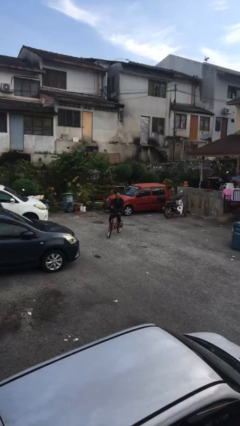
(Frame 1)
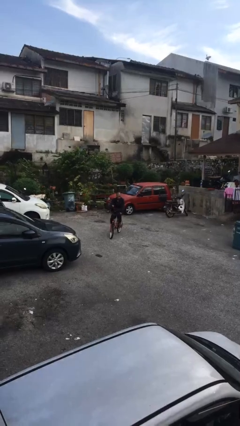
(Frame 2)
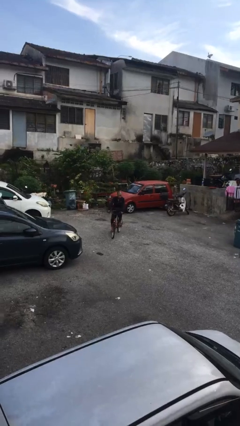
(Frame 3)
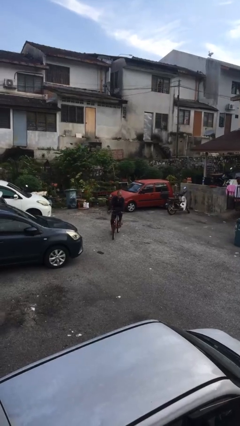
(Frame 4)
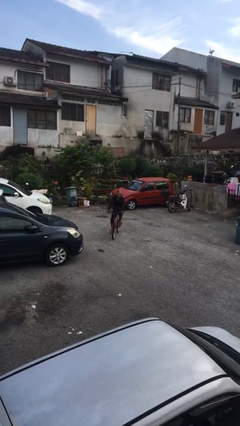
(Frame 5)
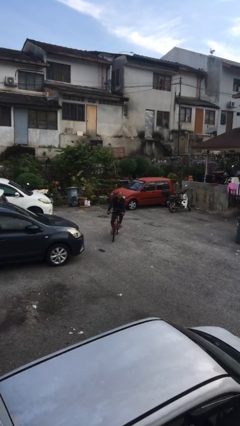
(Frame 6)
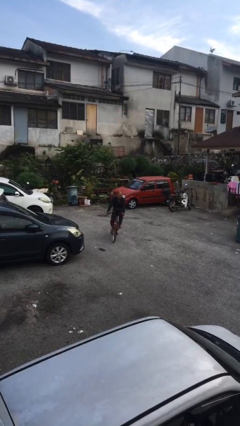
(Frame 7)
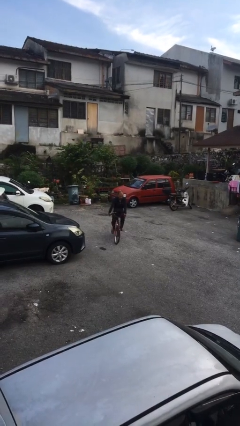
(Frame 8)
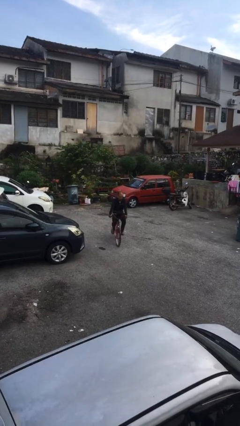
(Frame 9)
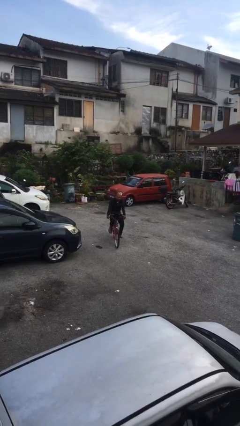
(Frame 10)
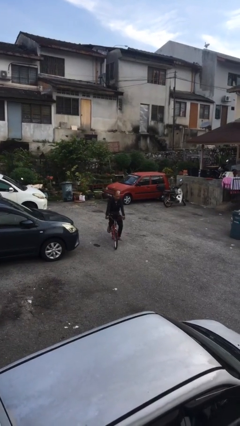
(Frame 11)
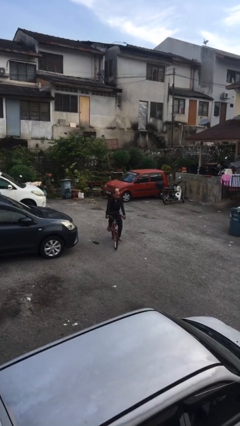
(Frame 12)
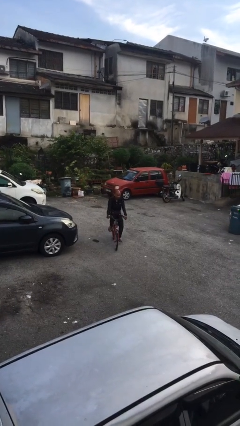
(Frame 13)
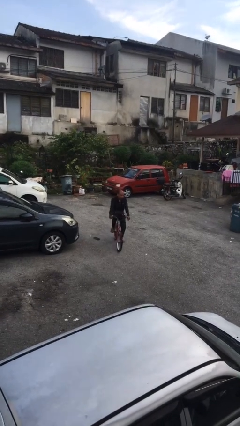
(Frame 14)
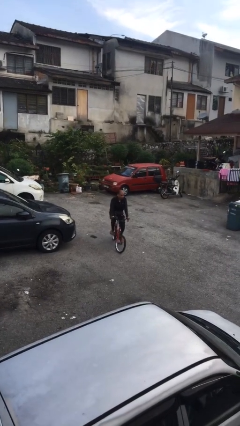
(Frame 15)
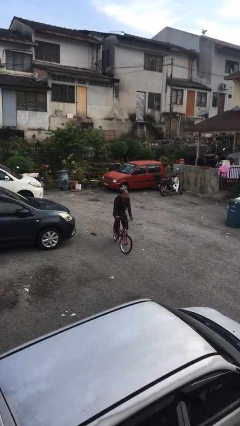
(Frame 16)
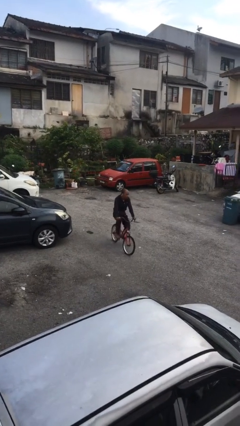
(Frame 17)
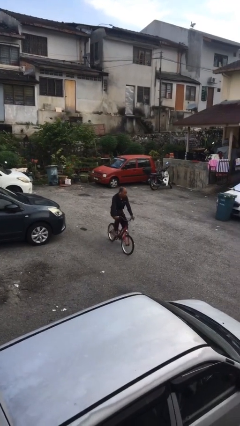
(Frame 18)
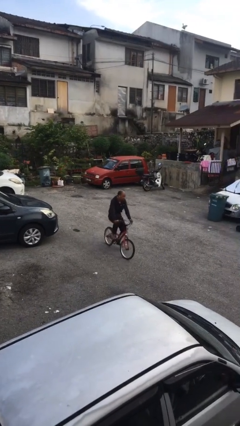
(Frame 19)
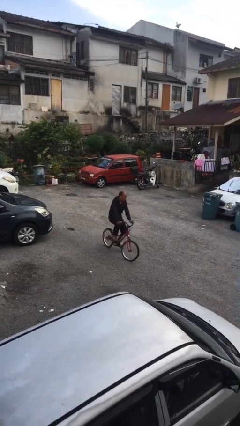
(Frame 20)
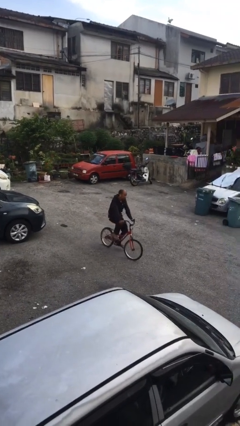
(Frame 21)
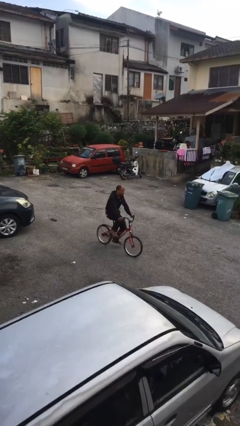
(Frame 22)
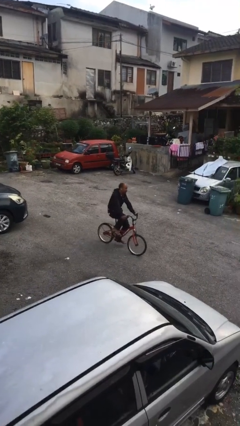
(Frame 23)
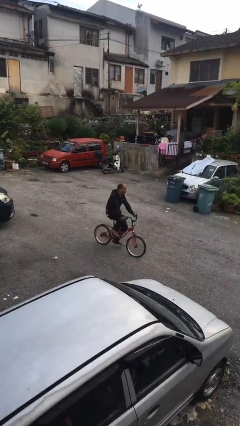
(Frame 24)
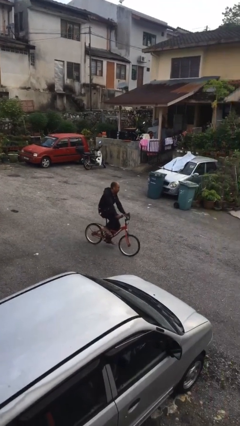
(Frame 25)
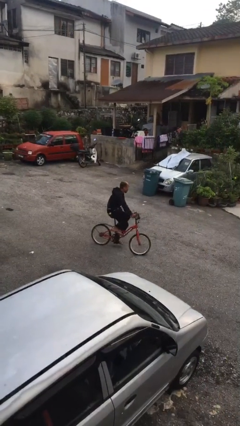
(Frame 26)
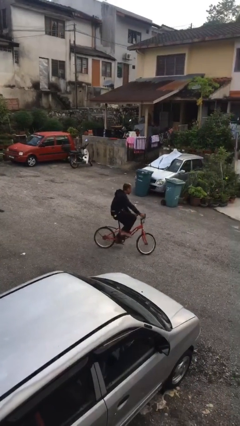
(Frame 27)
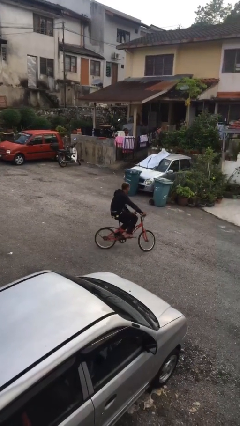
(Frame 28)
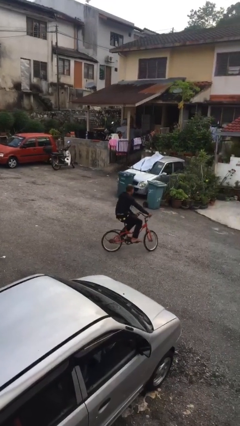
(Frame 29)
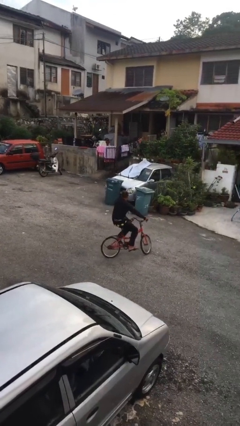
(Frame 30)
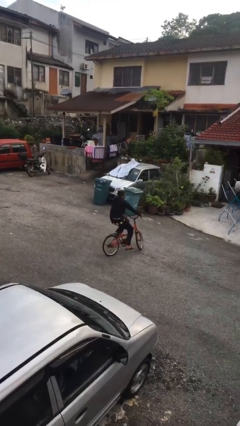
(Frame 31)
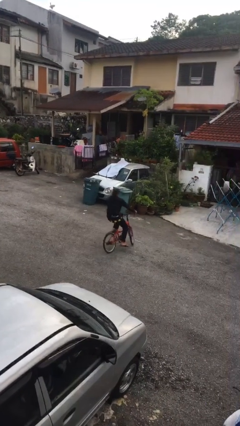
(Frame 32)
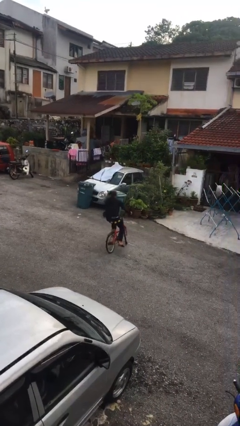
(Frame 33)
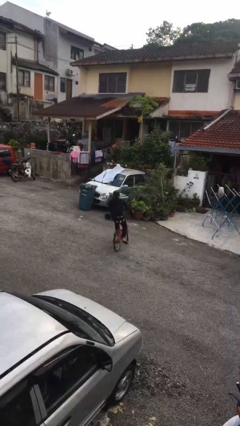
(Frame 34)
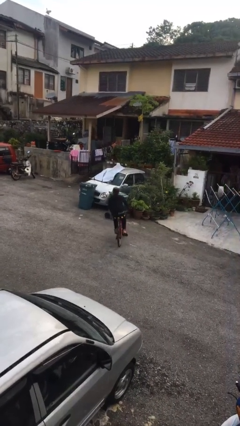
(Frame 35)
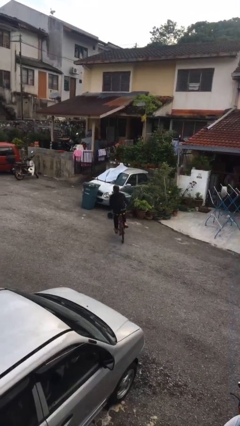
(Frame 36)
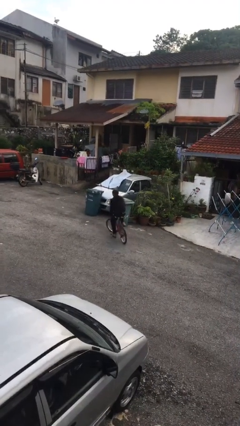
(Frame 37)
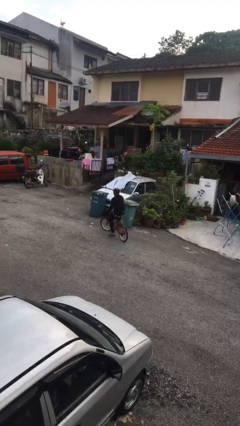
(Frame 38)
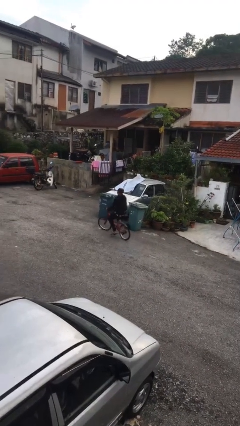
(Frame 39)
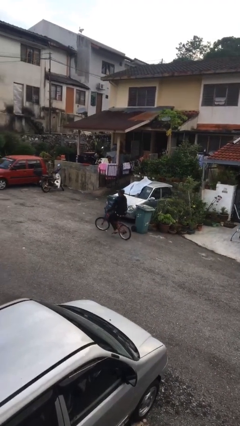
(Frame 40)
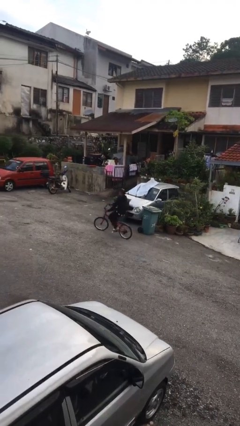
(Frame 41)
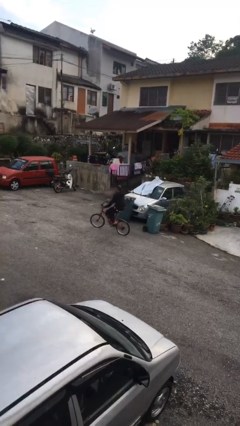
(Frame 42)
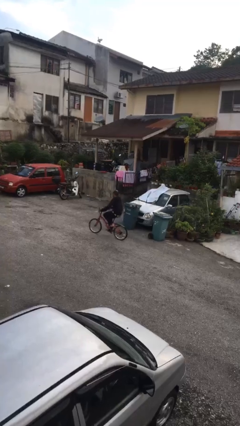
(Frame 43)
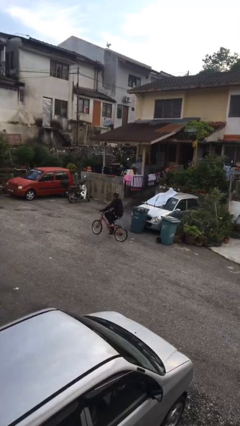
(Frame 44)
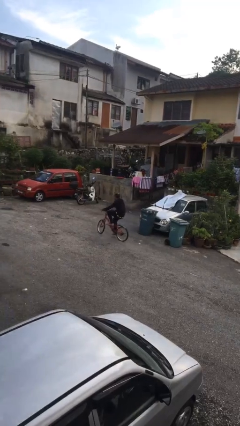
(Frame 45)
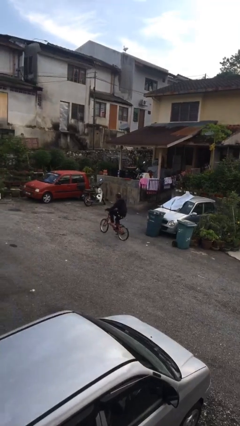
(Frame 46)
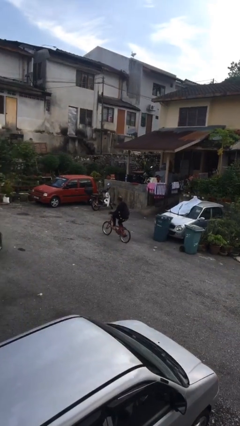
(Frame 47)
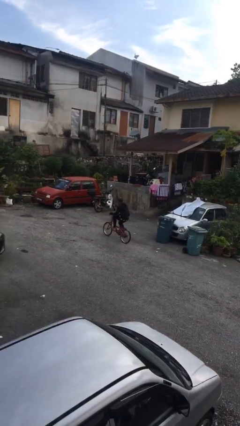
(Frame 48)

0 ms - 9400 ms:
person rides bicycle

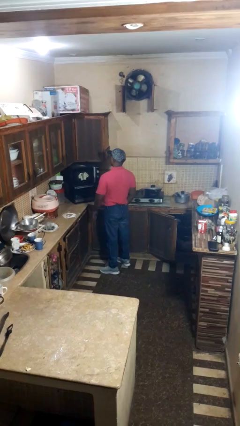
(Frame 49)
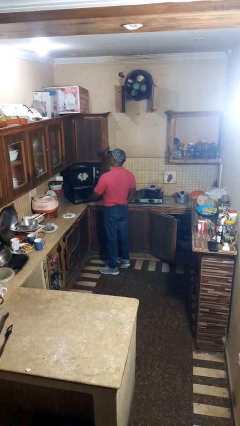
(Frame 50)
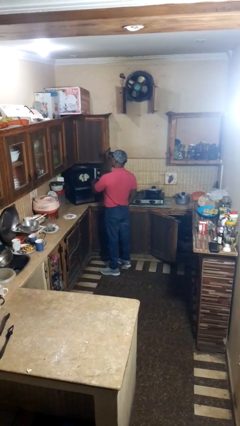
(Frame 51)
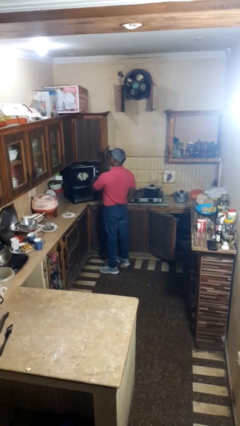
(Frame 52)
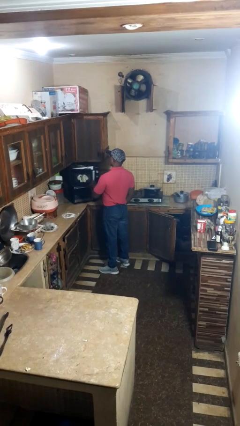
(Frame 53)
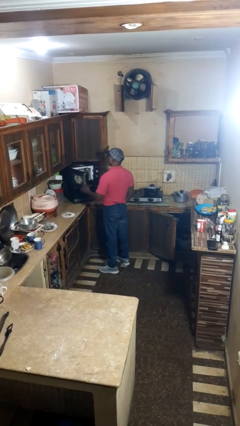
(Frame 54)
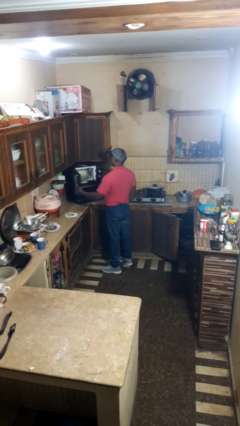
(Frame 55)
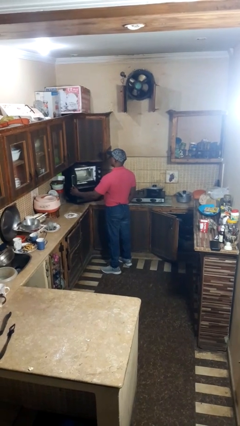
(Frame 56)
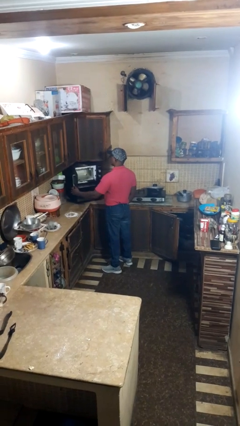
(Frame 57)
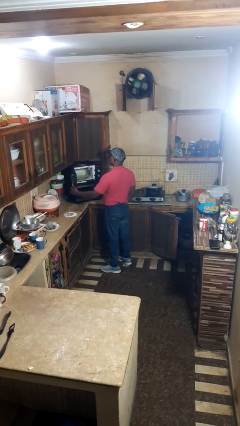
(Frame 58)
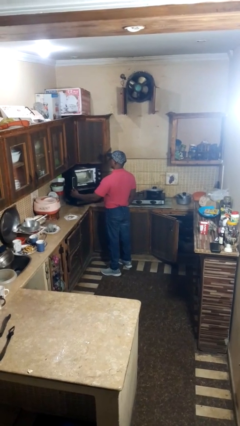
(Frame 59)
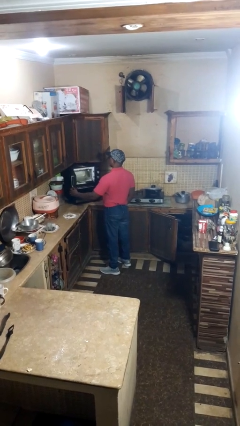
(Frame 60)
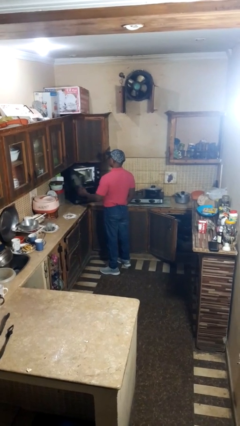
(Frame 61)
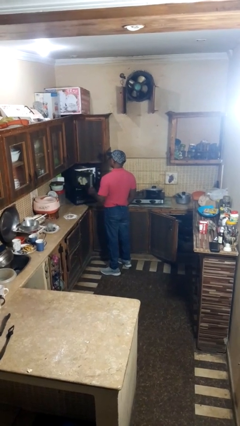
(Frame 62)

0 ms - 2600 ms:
person opens microwave

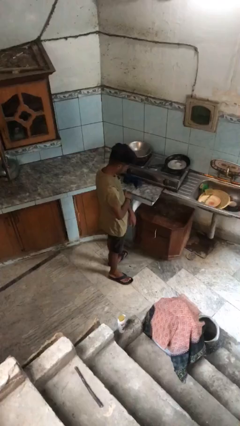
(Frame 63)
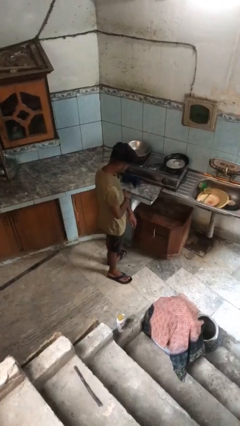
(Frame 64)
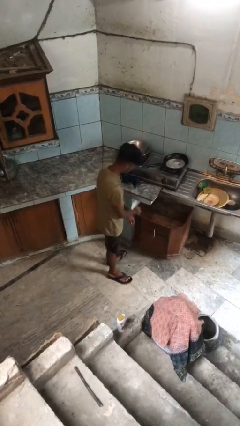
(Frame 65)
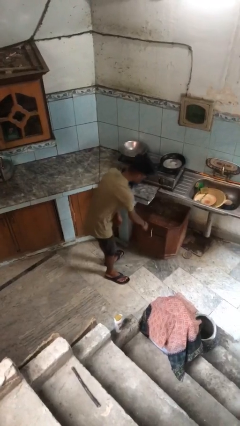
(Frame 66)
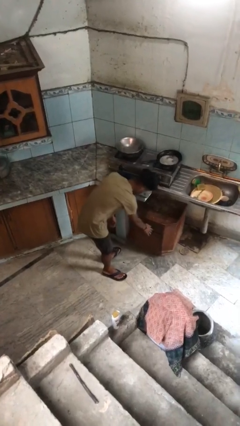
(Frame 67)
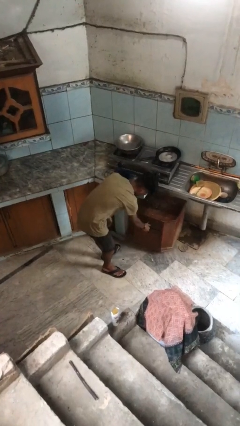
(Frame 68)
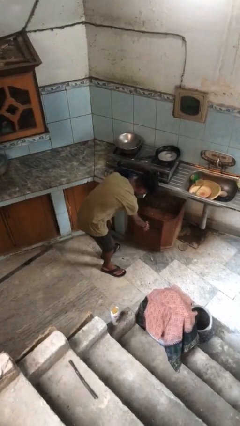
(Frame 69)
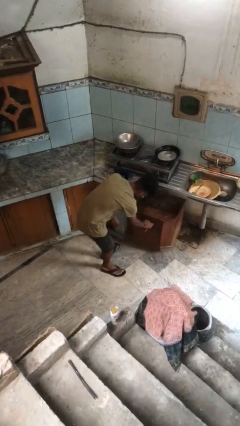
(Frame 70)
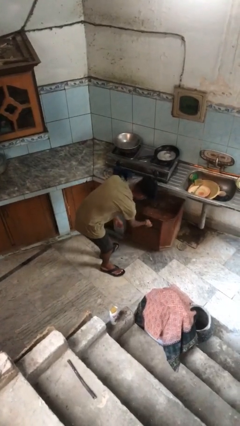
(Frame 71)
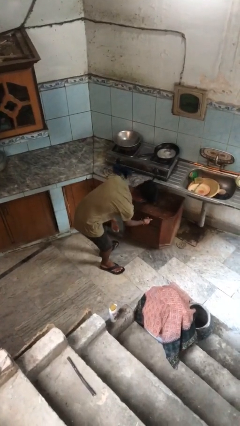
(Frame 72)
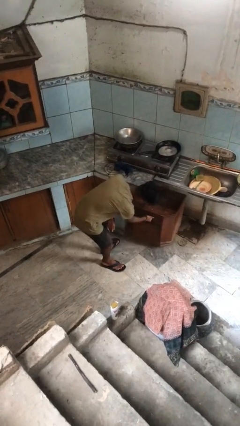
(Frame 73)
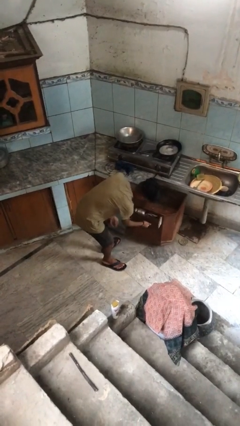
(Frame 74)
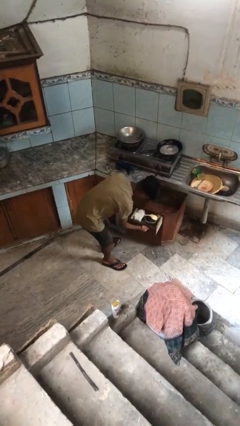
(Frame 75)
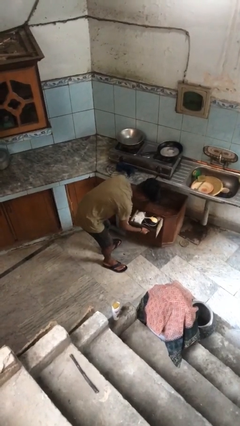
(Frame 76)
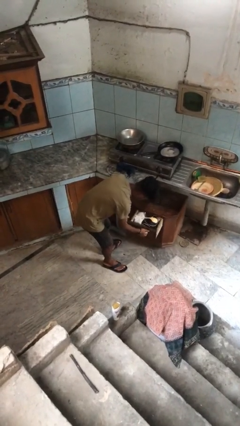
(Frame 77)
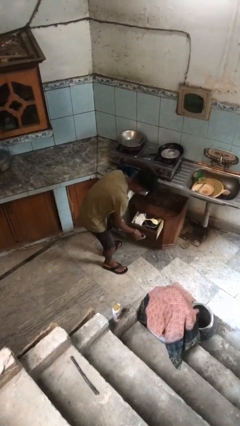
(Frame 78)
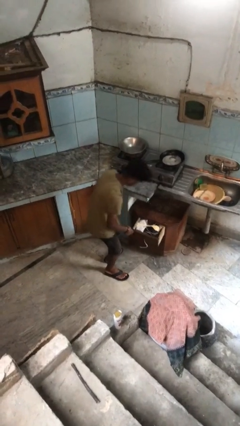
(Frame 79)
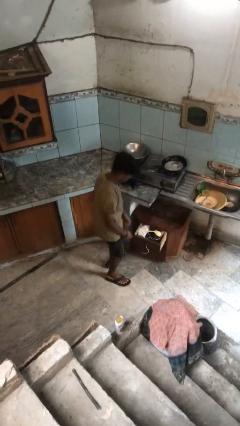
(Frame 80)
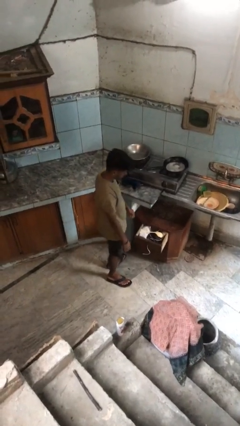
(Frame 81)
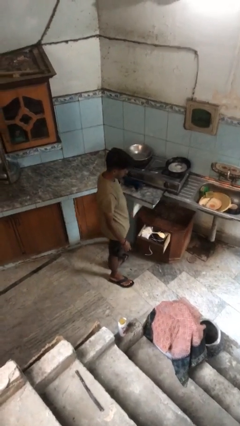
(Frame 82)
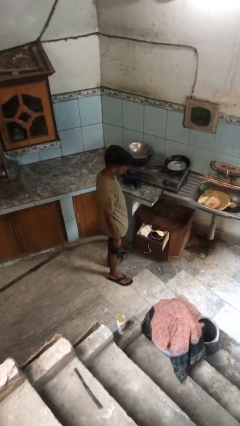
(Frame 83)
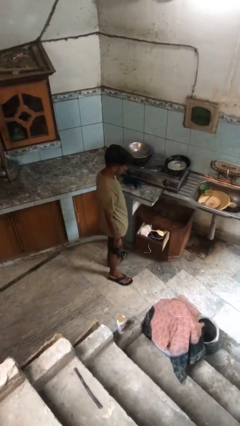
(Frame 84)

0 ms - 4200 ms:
person opens kitchen drawer

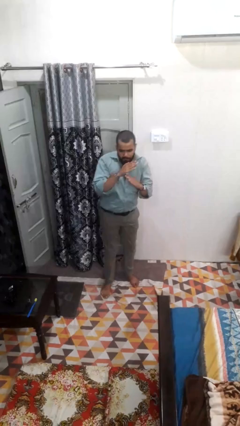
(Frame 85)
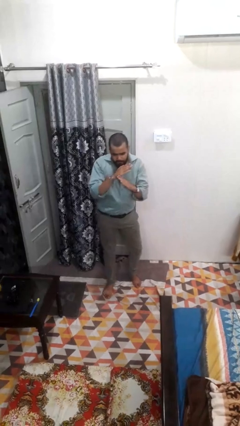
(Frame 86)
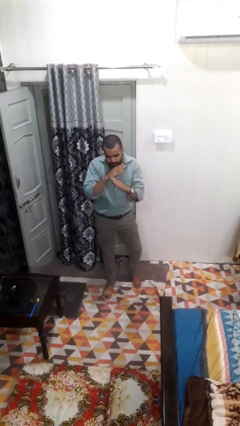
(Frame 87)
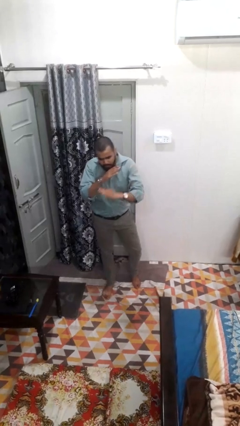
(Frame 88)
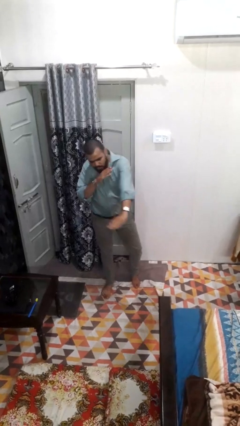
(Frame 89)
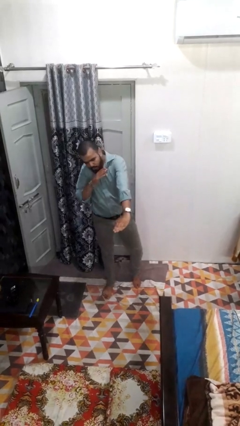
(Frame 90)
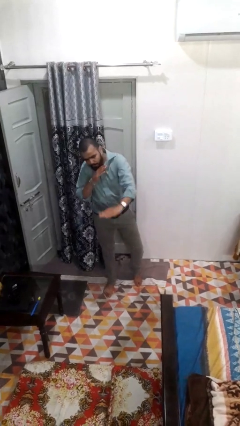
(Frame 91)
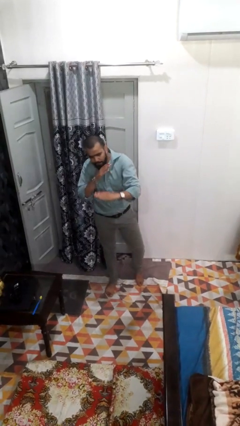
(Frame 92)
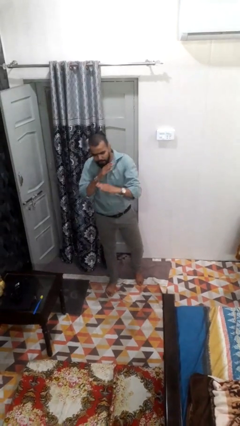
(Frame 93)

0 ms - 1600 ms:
person karate chop
